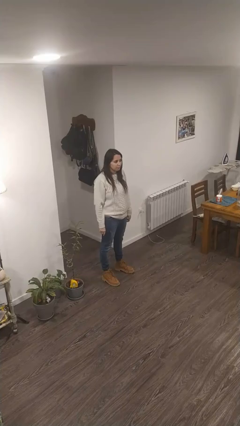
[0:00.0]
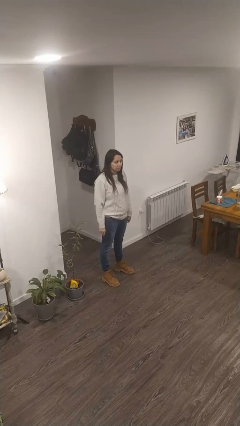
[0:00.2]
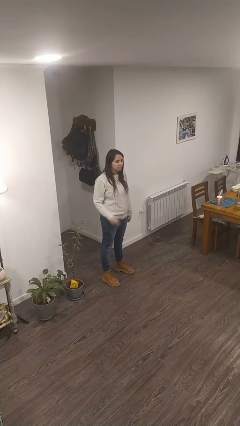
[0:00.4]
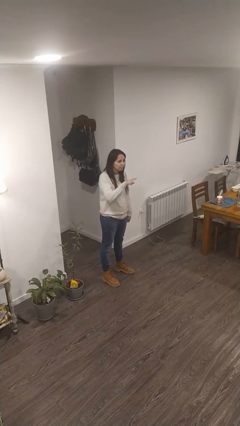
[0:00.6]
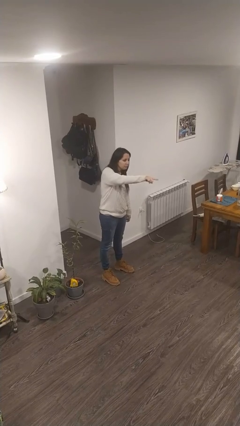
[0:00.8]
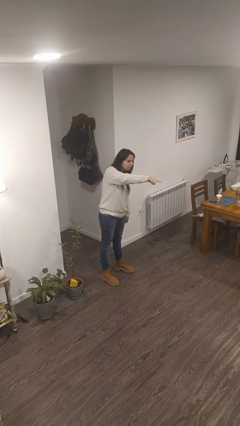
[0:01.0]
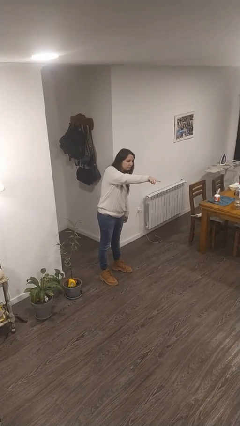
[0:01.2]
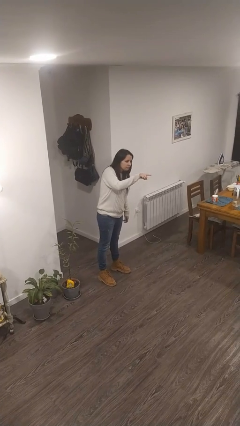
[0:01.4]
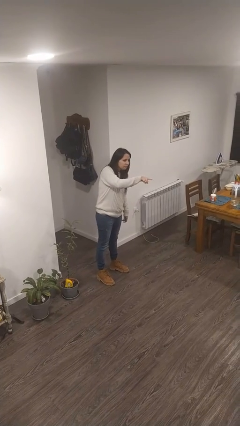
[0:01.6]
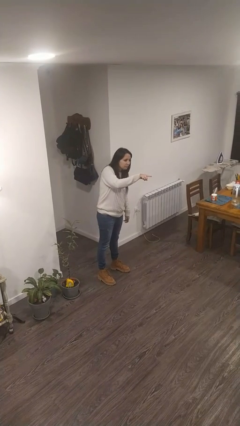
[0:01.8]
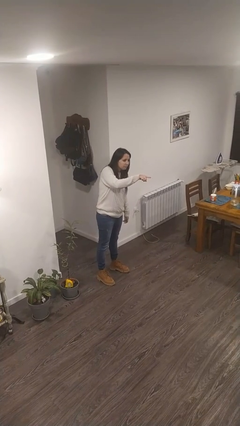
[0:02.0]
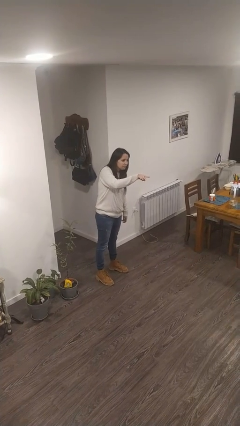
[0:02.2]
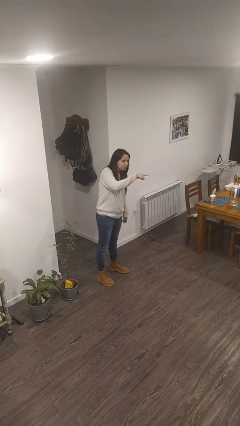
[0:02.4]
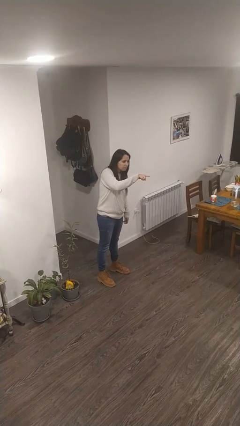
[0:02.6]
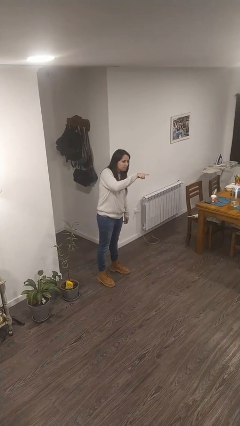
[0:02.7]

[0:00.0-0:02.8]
person points at person

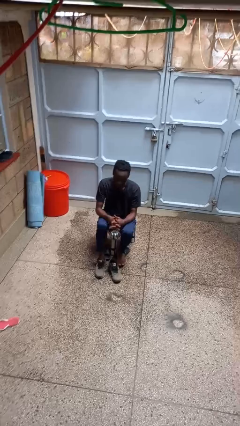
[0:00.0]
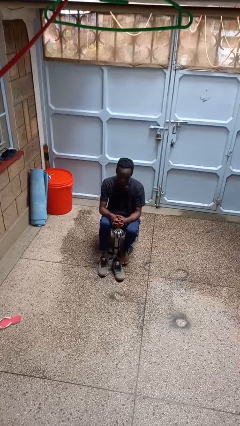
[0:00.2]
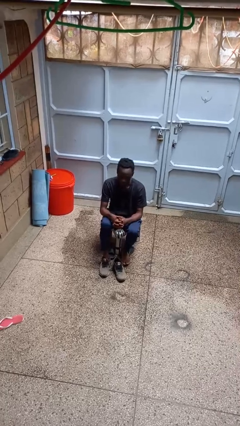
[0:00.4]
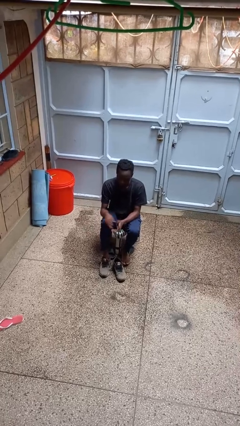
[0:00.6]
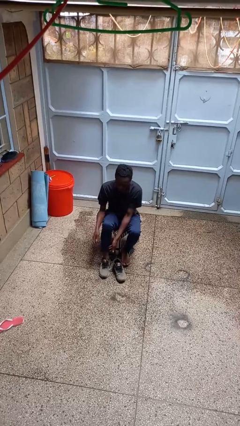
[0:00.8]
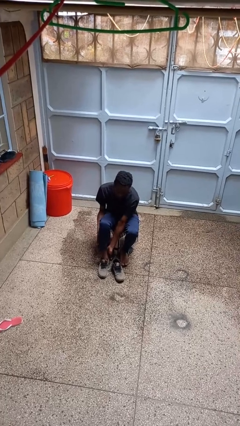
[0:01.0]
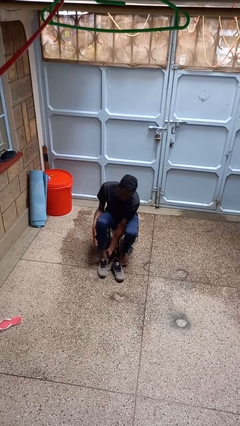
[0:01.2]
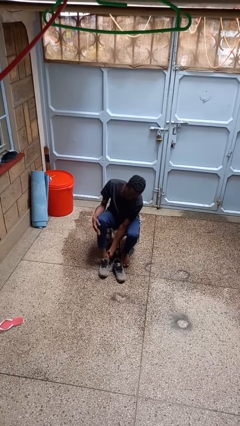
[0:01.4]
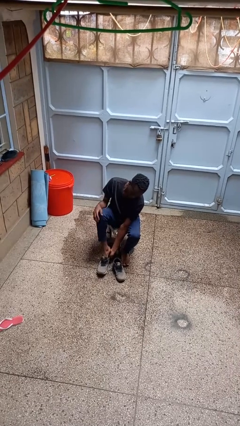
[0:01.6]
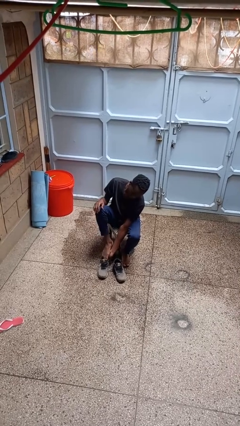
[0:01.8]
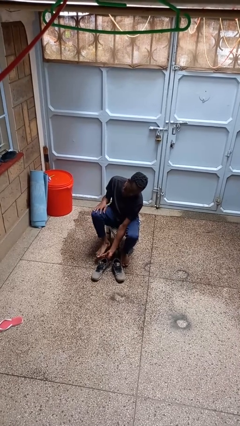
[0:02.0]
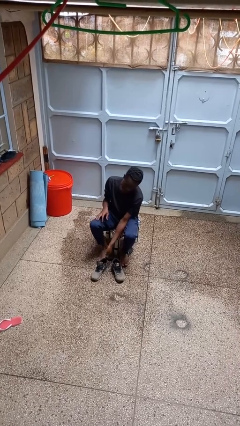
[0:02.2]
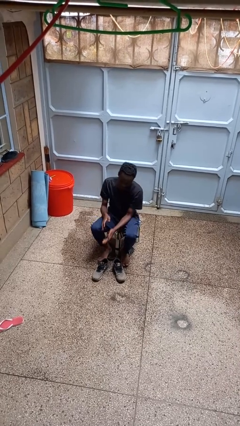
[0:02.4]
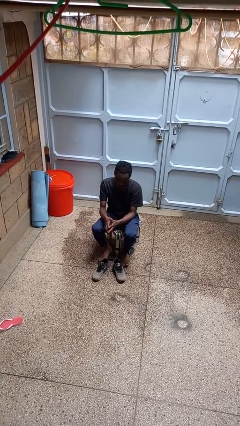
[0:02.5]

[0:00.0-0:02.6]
person takes off shoes

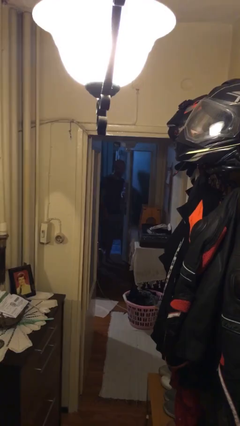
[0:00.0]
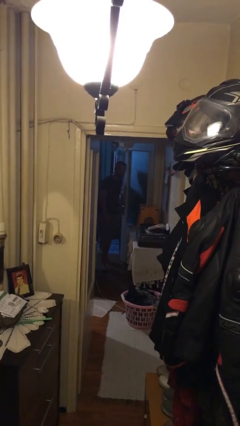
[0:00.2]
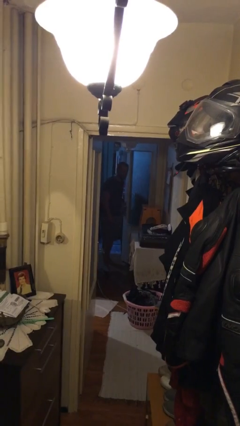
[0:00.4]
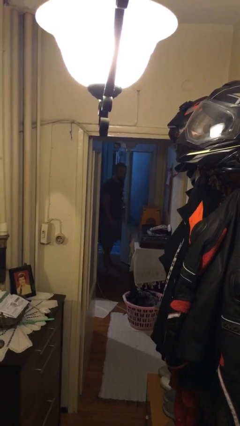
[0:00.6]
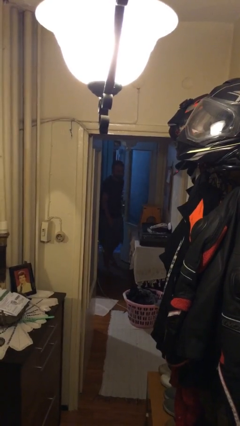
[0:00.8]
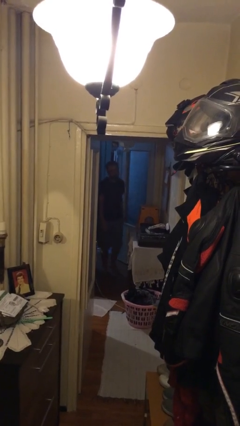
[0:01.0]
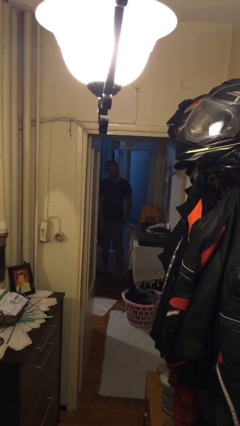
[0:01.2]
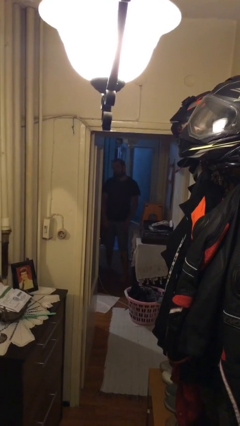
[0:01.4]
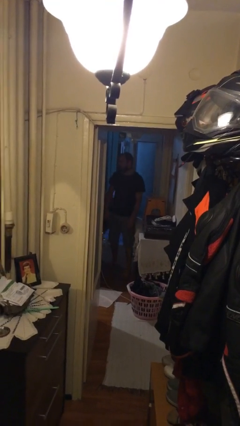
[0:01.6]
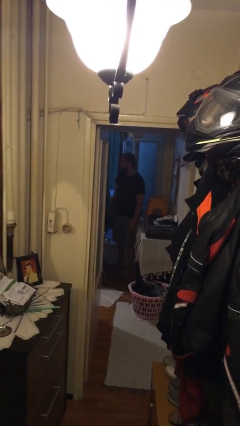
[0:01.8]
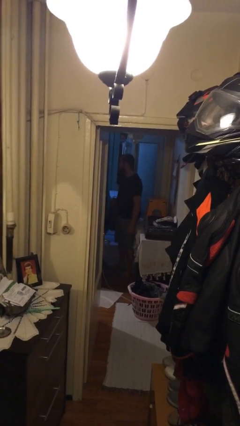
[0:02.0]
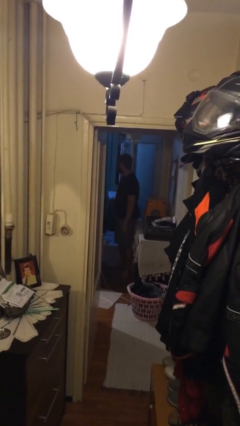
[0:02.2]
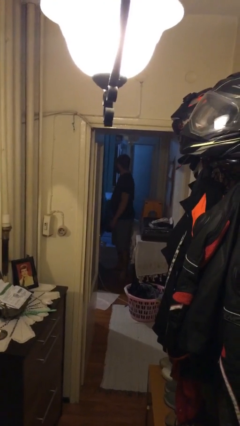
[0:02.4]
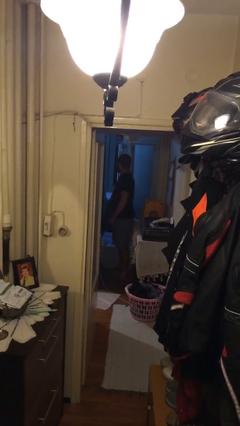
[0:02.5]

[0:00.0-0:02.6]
person enters scene through structure

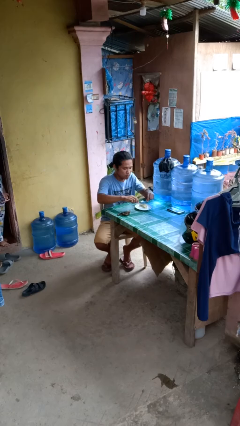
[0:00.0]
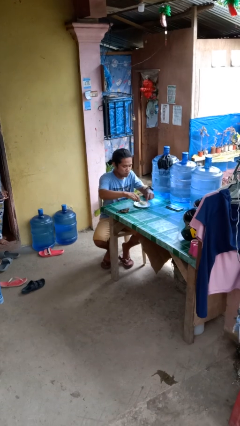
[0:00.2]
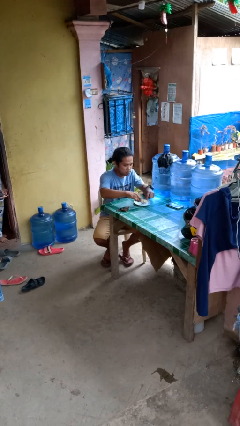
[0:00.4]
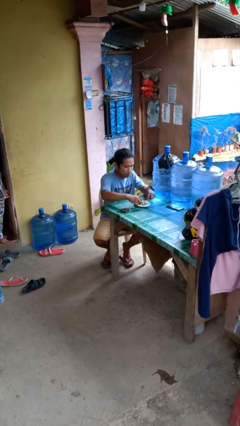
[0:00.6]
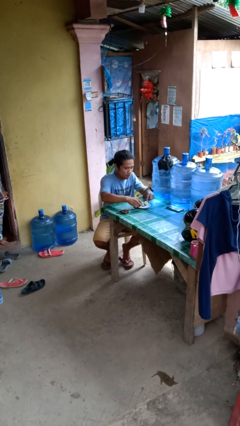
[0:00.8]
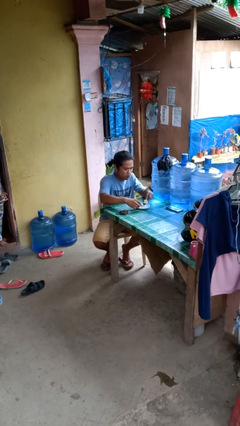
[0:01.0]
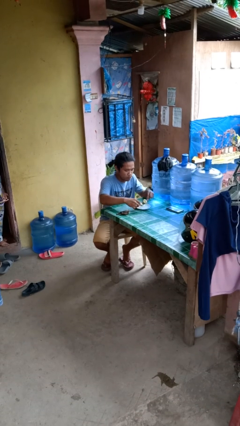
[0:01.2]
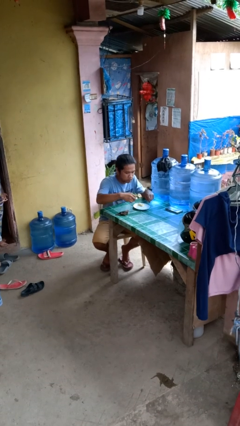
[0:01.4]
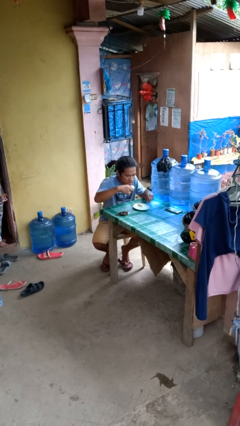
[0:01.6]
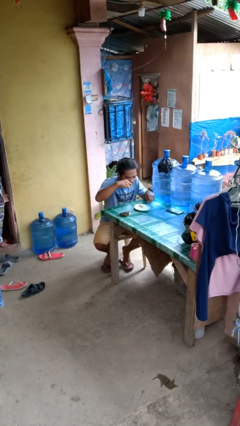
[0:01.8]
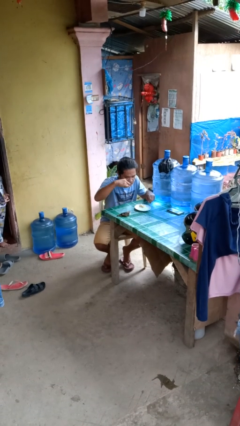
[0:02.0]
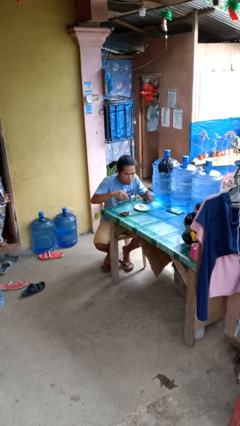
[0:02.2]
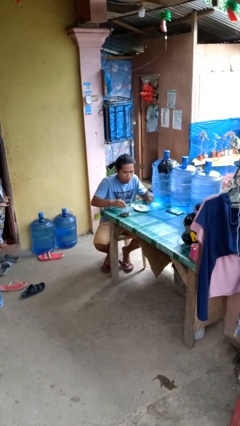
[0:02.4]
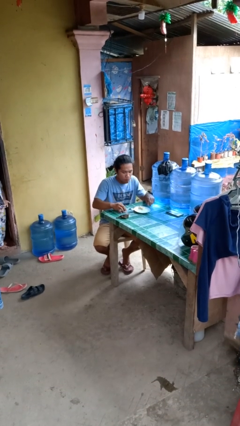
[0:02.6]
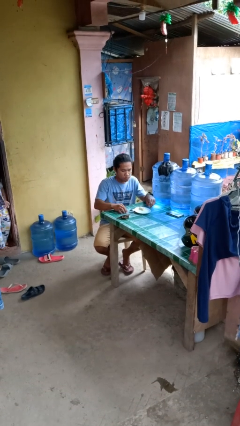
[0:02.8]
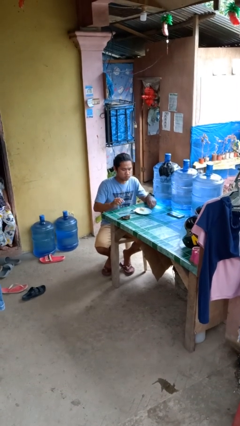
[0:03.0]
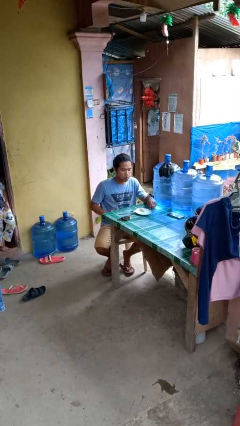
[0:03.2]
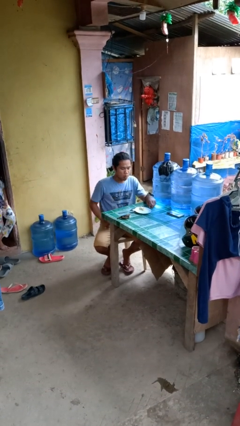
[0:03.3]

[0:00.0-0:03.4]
person eats with utensil

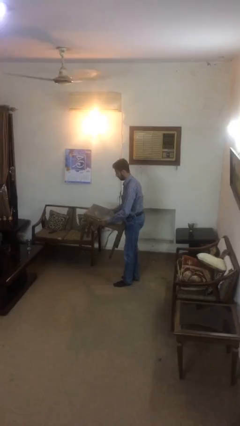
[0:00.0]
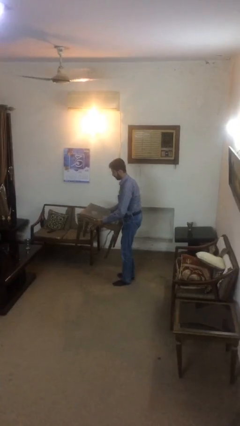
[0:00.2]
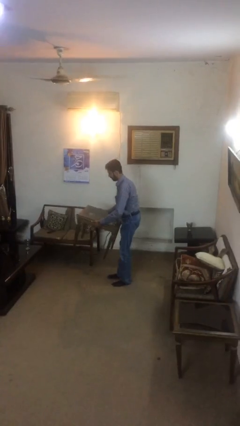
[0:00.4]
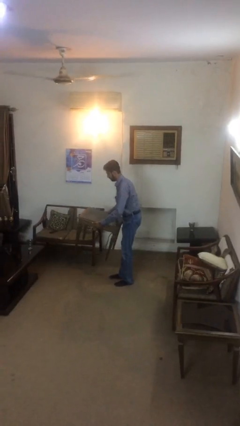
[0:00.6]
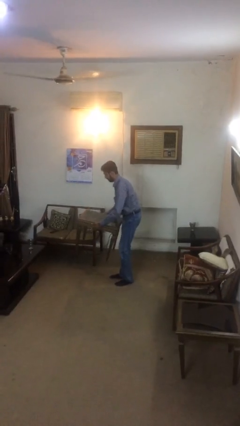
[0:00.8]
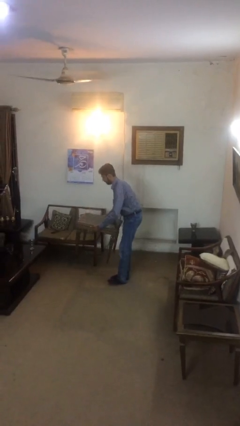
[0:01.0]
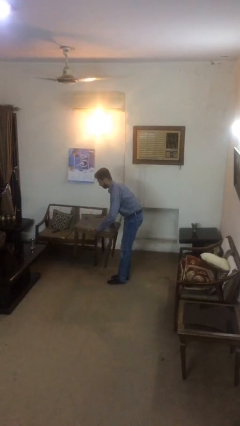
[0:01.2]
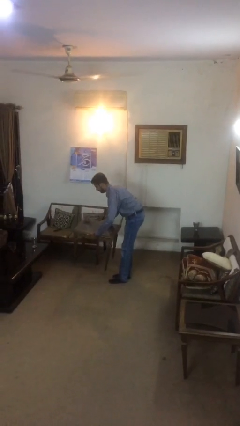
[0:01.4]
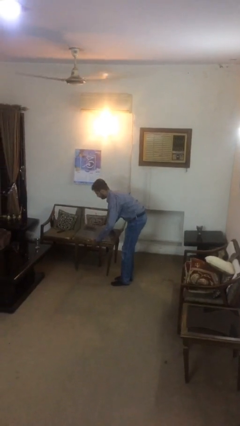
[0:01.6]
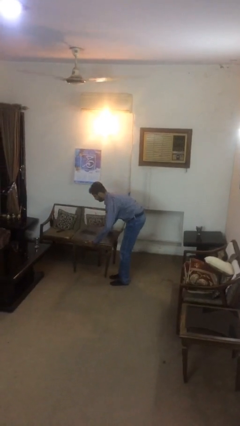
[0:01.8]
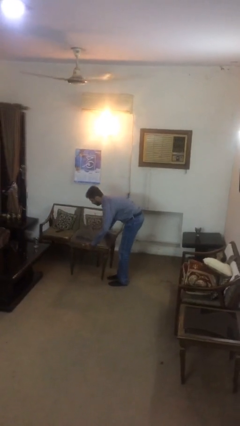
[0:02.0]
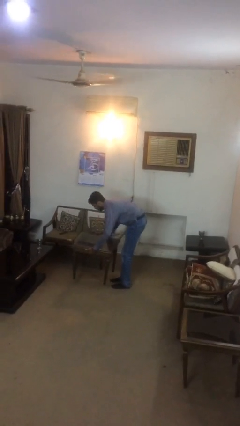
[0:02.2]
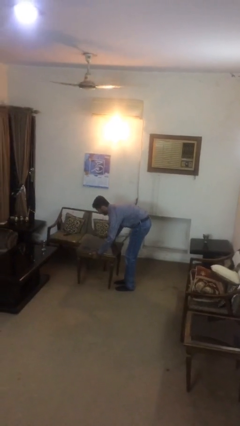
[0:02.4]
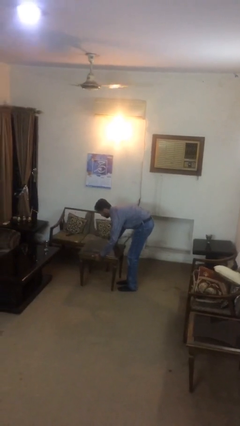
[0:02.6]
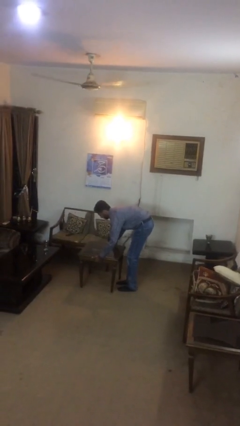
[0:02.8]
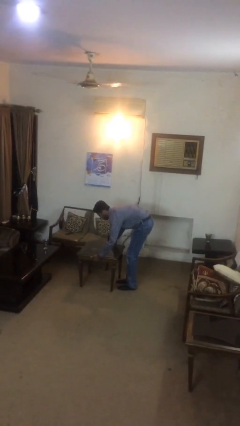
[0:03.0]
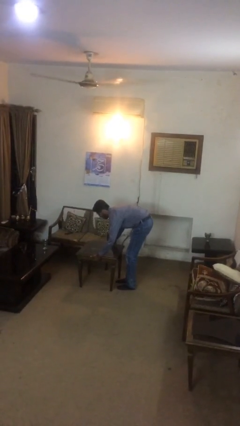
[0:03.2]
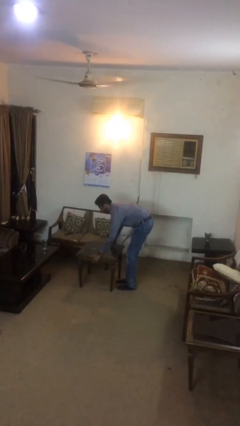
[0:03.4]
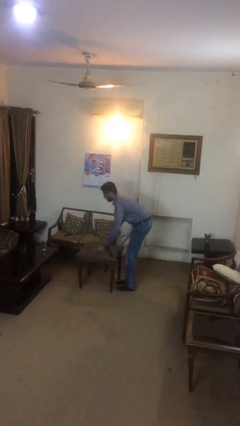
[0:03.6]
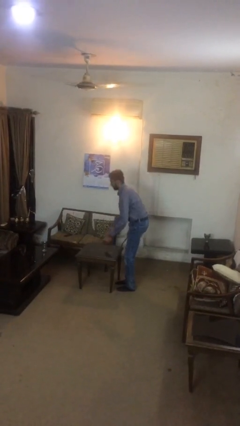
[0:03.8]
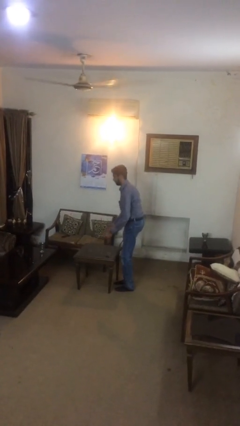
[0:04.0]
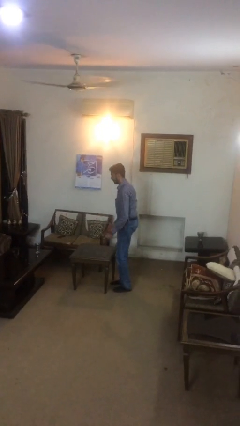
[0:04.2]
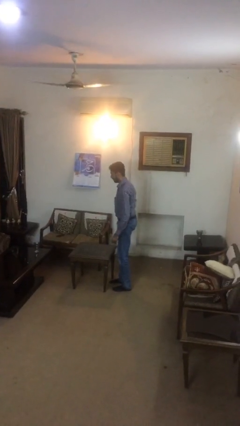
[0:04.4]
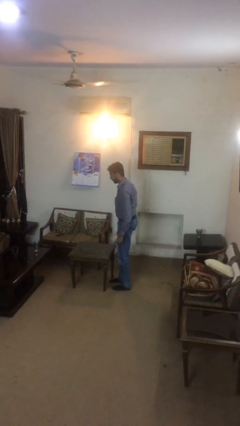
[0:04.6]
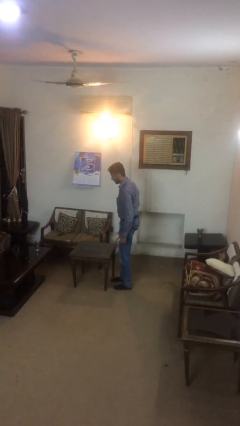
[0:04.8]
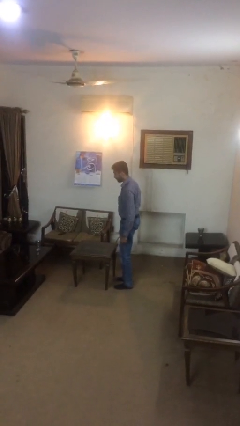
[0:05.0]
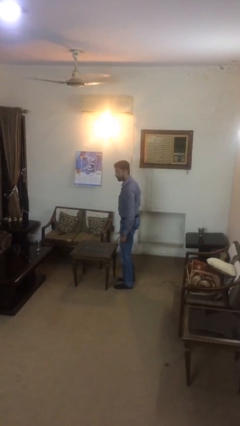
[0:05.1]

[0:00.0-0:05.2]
person puts down object on floor

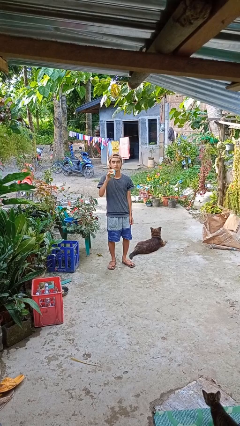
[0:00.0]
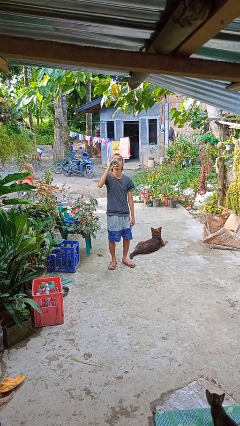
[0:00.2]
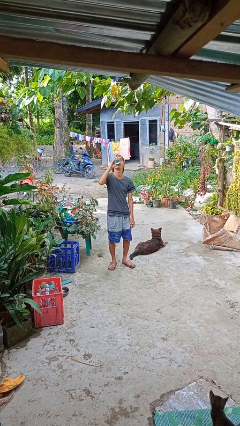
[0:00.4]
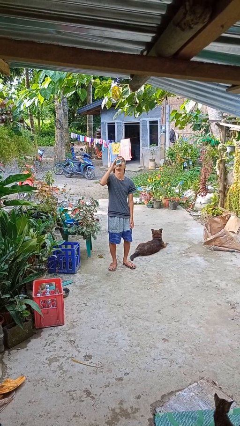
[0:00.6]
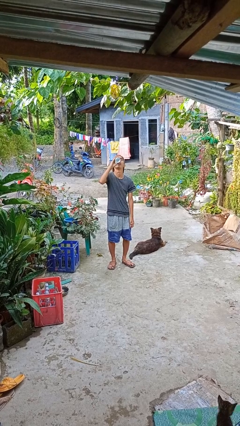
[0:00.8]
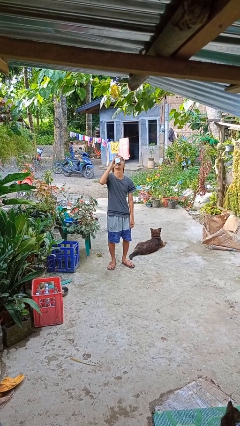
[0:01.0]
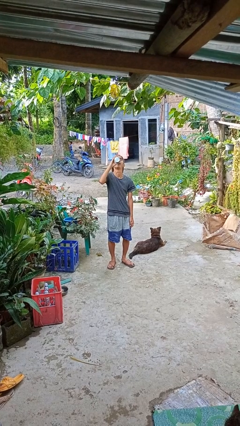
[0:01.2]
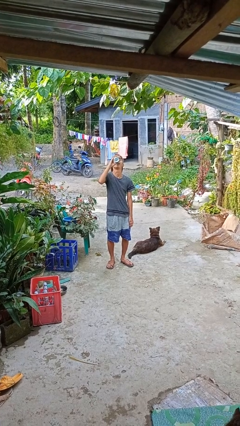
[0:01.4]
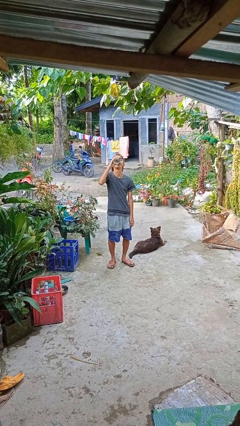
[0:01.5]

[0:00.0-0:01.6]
person drinks from beverage can
